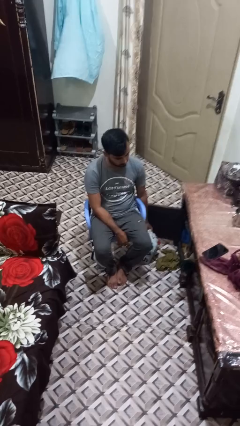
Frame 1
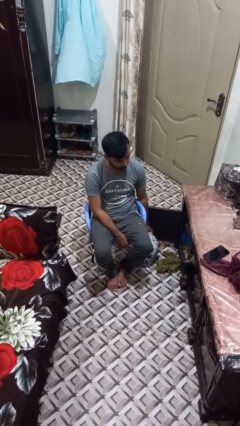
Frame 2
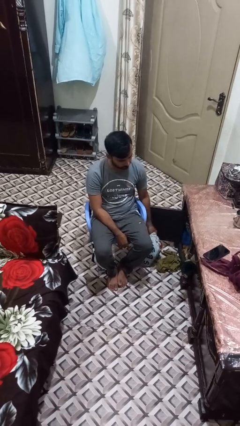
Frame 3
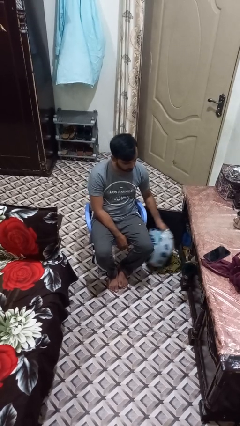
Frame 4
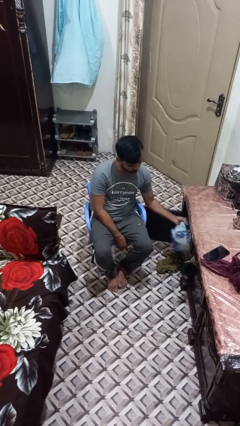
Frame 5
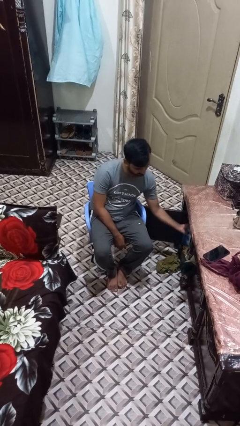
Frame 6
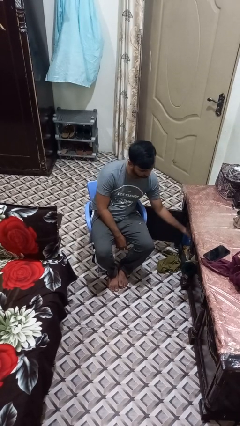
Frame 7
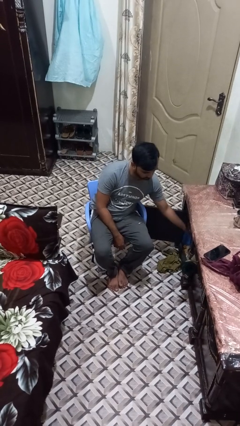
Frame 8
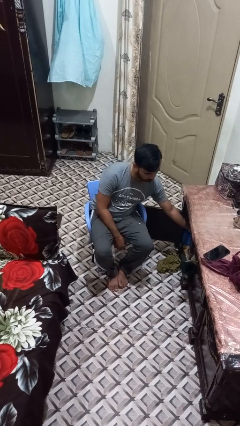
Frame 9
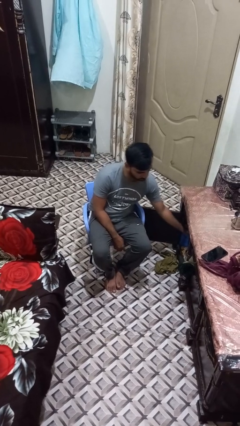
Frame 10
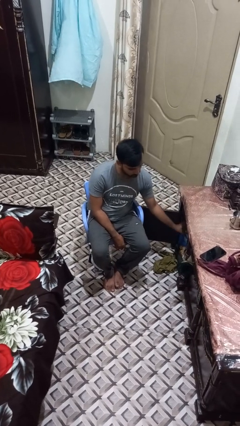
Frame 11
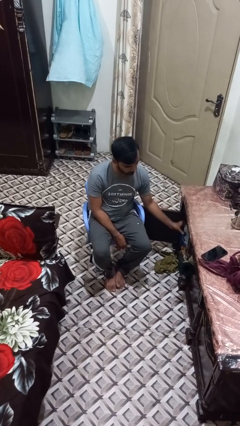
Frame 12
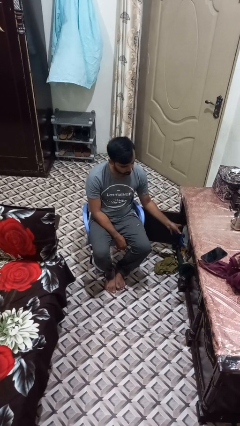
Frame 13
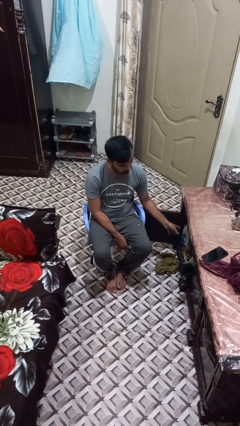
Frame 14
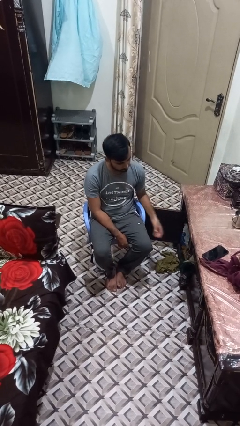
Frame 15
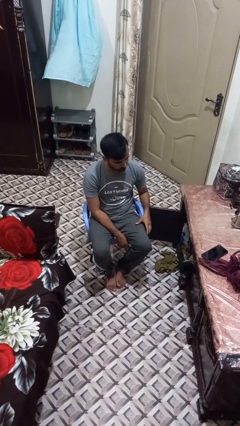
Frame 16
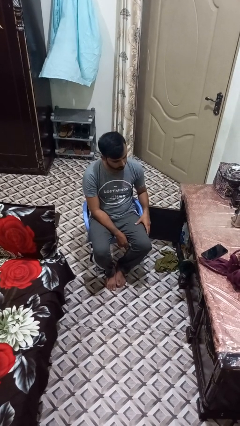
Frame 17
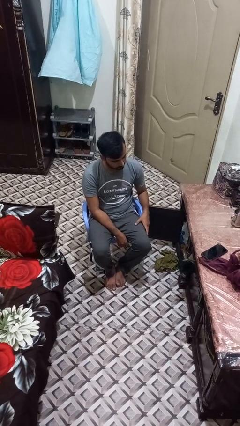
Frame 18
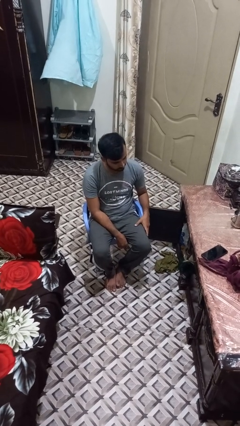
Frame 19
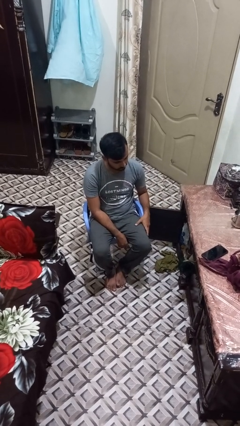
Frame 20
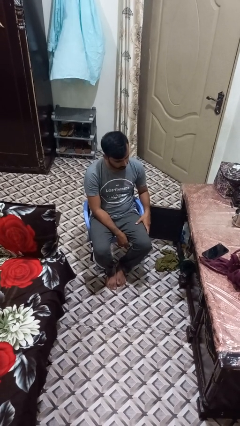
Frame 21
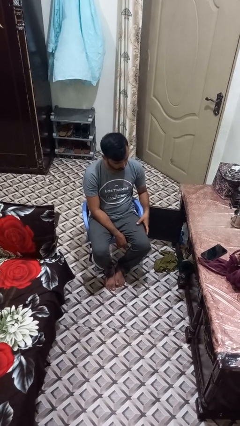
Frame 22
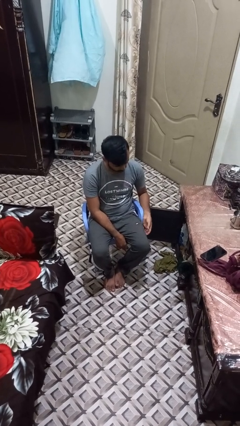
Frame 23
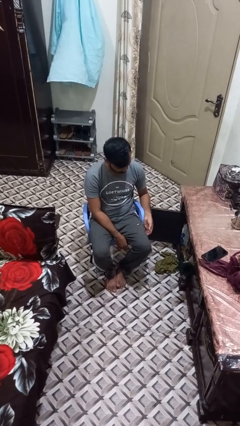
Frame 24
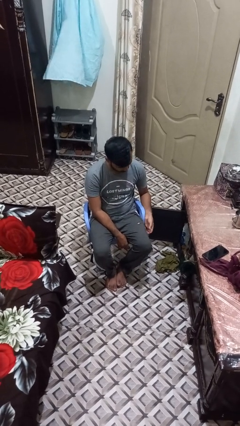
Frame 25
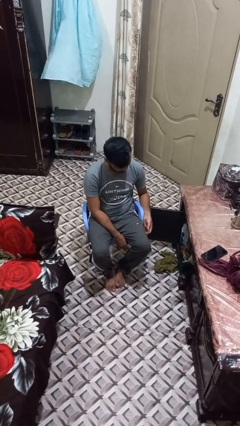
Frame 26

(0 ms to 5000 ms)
person puts down object into cabinet

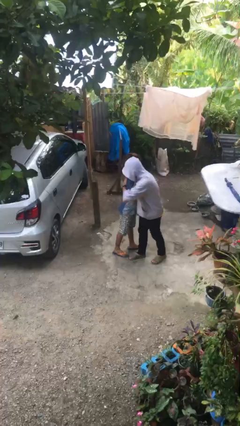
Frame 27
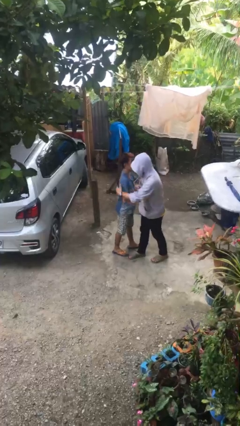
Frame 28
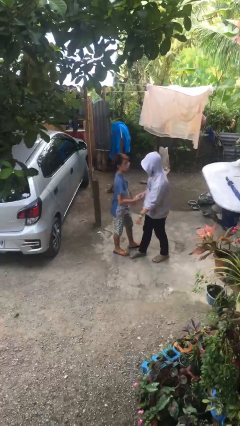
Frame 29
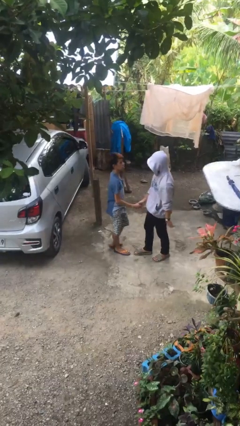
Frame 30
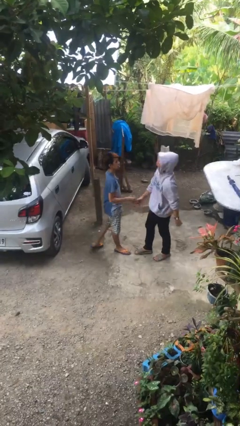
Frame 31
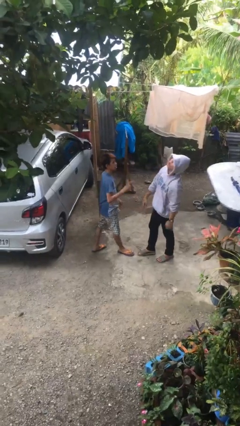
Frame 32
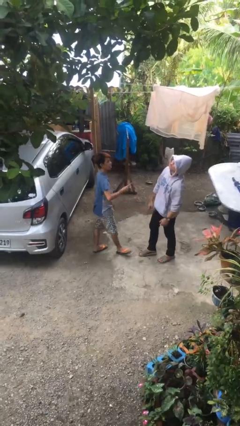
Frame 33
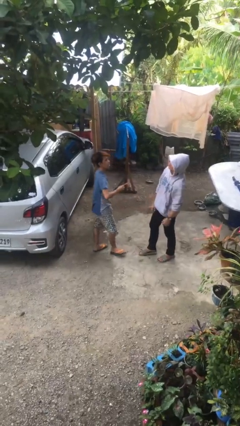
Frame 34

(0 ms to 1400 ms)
person embraces person

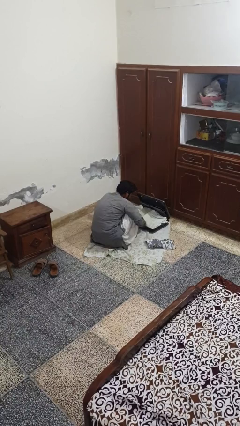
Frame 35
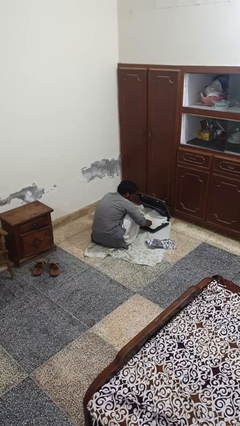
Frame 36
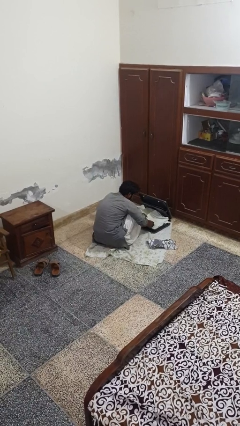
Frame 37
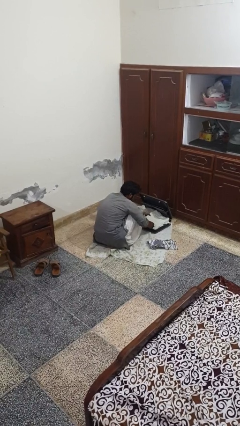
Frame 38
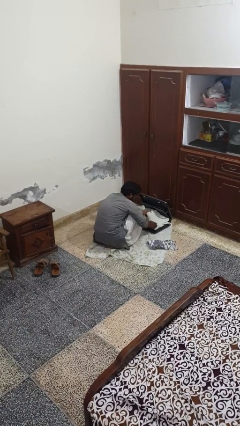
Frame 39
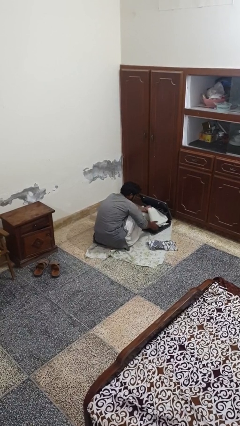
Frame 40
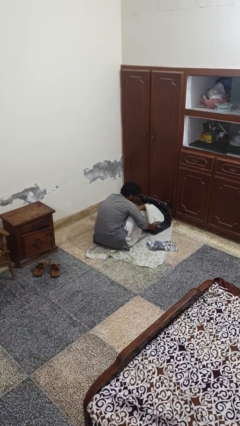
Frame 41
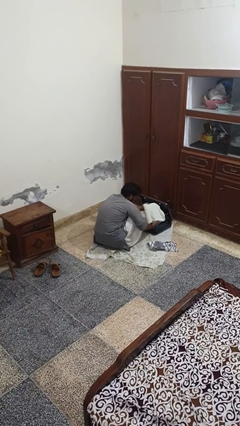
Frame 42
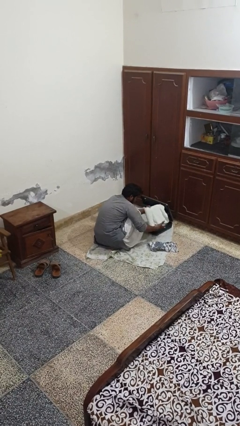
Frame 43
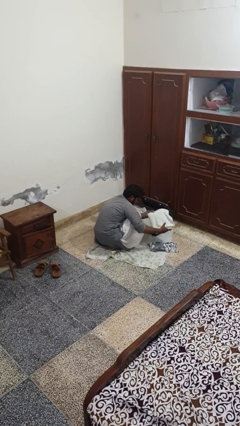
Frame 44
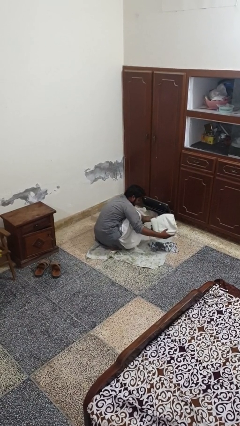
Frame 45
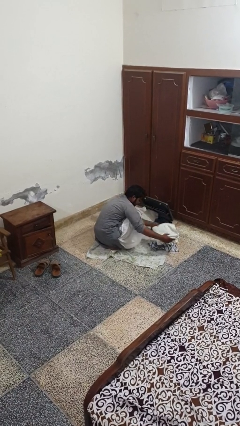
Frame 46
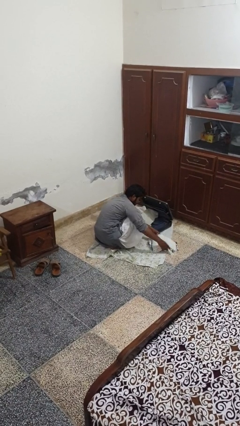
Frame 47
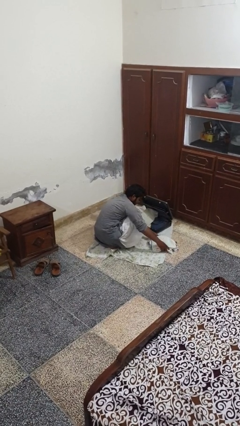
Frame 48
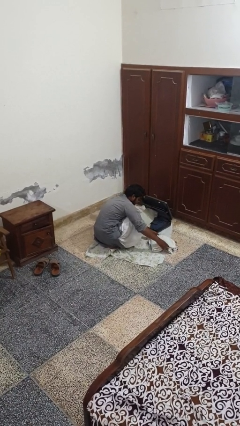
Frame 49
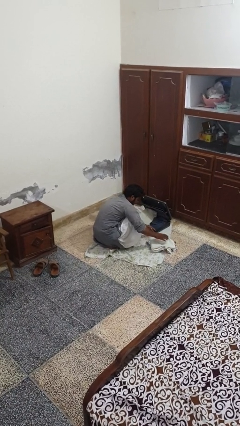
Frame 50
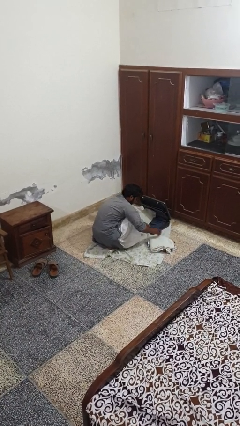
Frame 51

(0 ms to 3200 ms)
person unloads clothes from suitcase

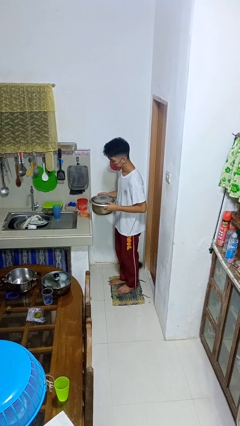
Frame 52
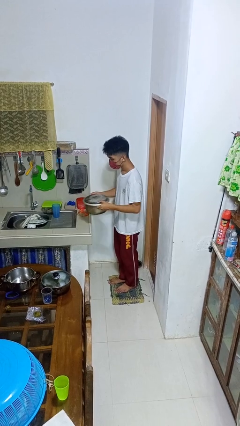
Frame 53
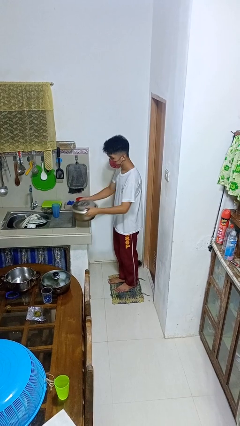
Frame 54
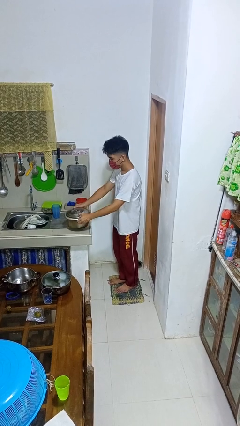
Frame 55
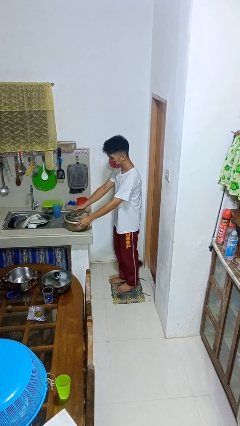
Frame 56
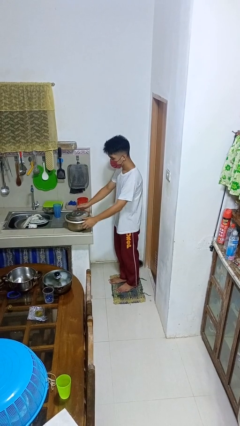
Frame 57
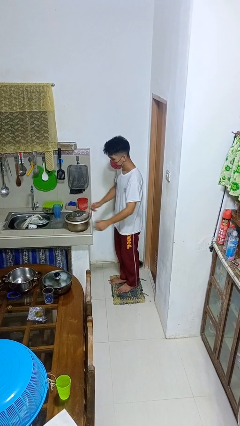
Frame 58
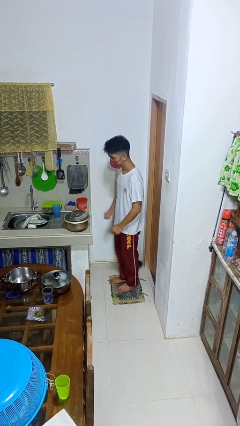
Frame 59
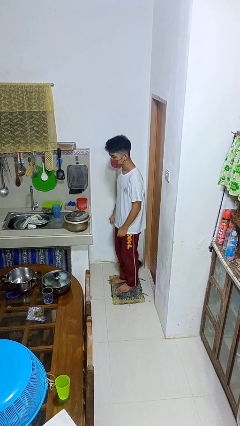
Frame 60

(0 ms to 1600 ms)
person puts down object on countertop

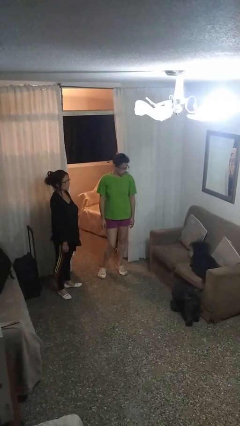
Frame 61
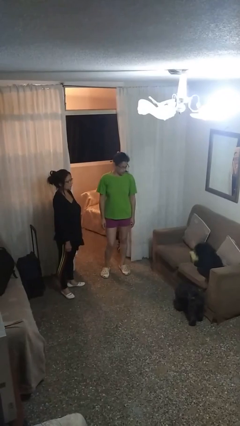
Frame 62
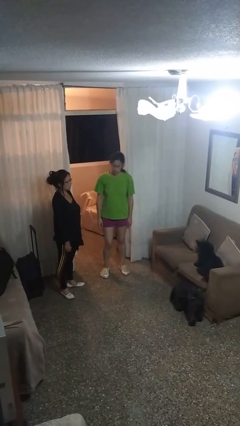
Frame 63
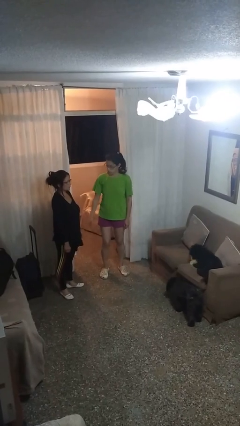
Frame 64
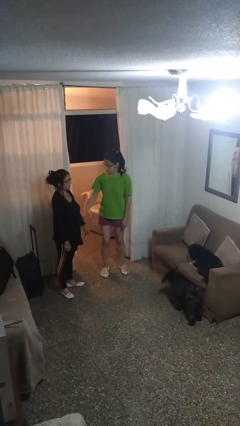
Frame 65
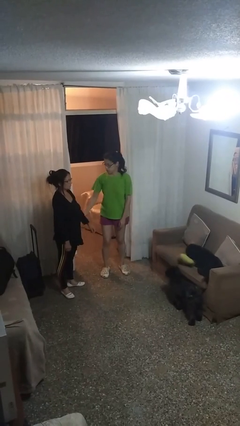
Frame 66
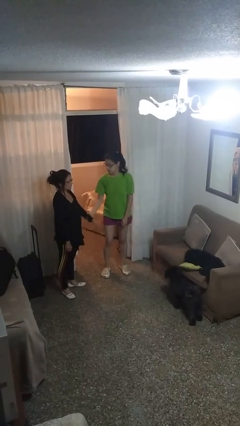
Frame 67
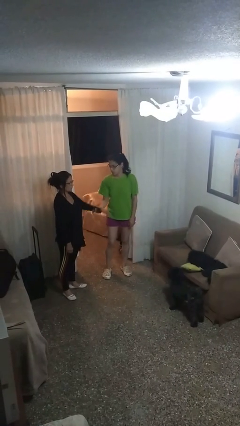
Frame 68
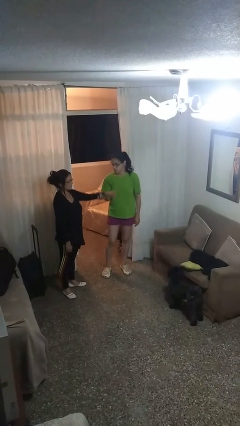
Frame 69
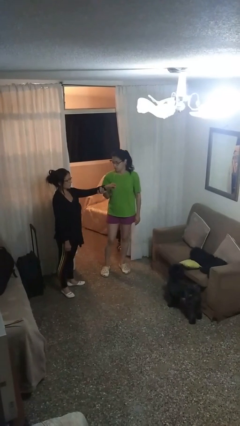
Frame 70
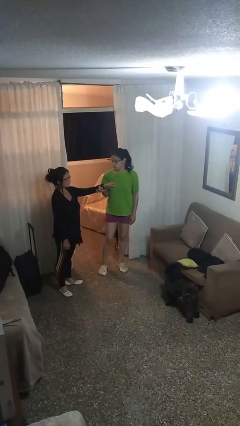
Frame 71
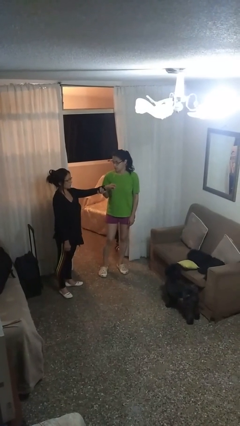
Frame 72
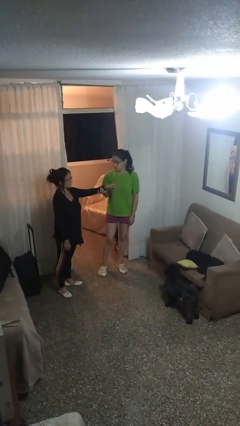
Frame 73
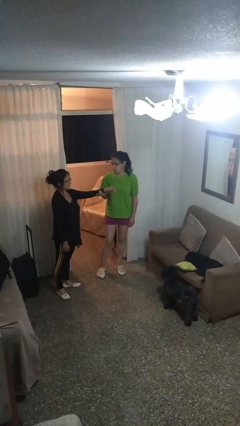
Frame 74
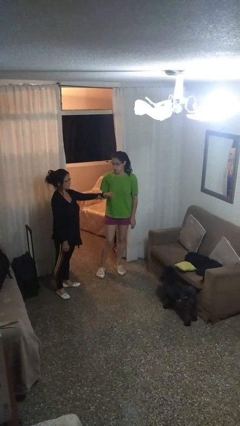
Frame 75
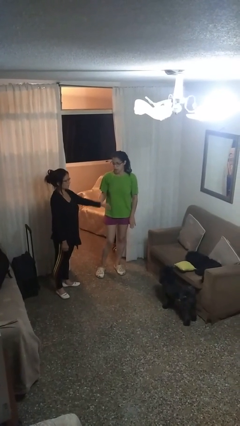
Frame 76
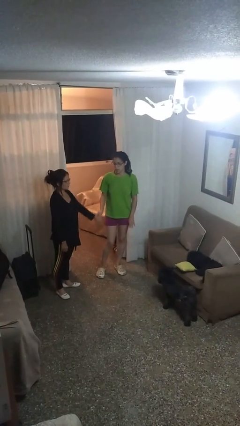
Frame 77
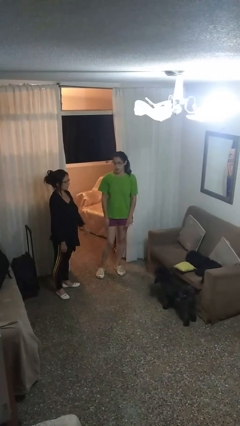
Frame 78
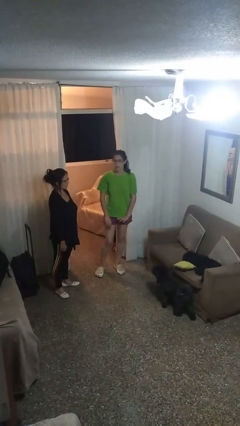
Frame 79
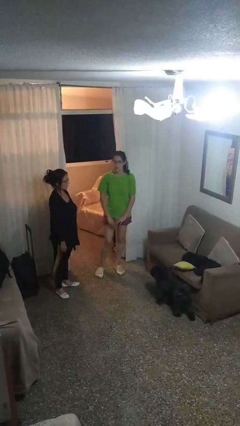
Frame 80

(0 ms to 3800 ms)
person grabs person by forearm

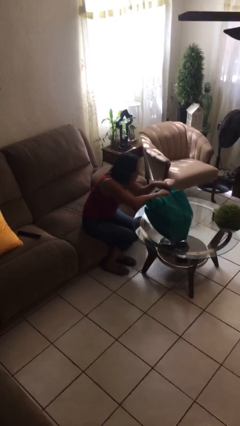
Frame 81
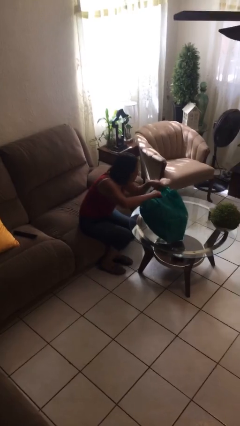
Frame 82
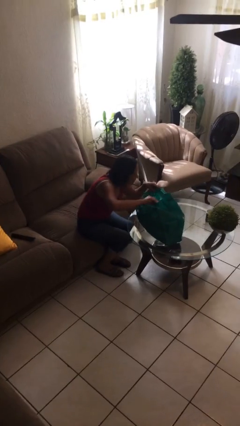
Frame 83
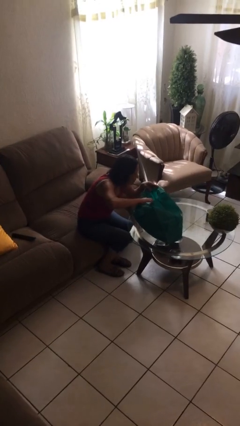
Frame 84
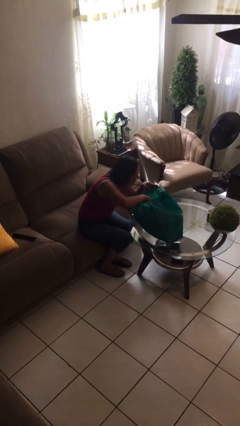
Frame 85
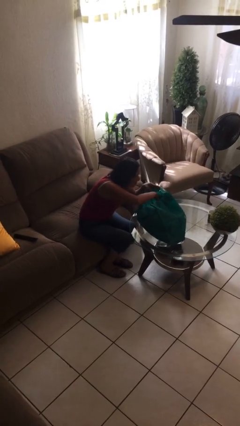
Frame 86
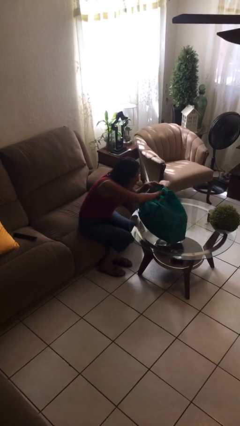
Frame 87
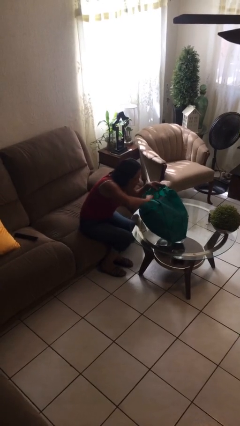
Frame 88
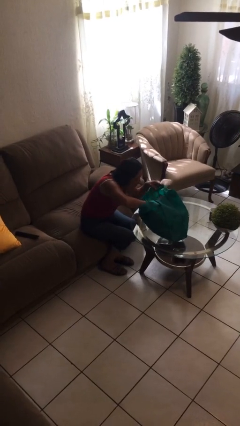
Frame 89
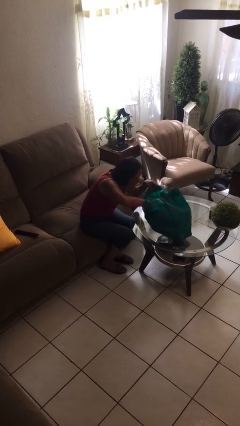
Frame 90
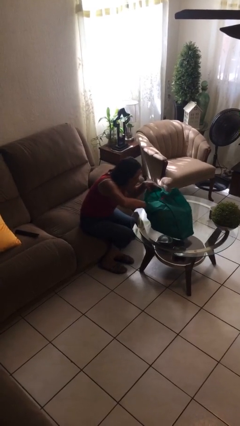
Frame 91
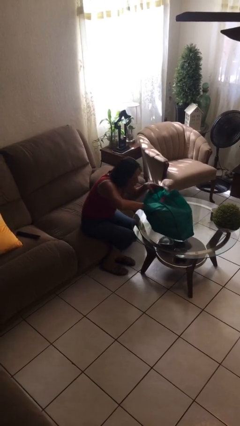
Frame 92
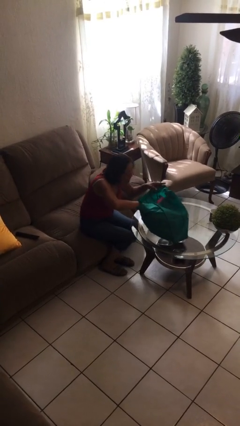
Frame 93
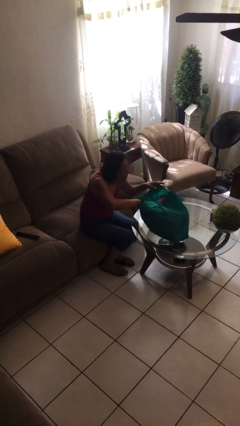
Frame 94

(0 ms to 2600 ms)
person searches in bag
